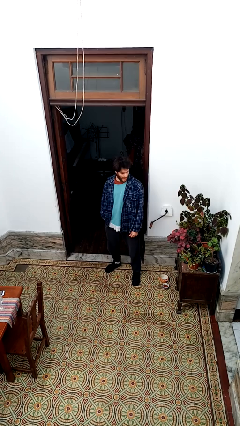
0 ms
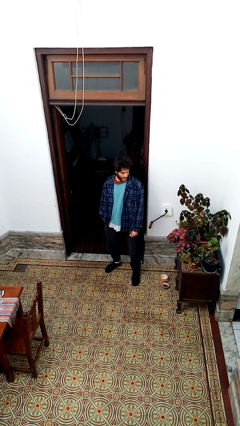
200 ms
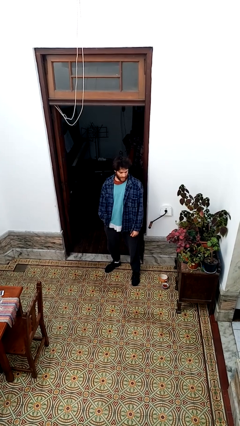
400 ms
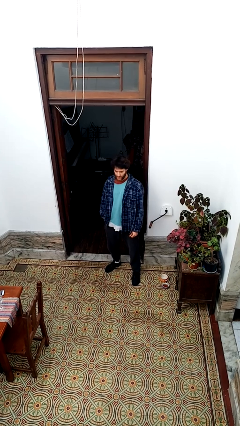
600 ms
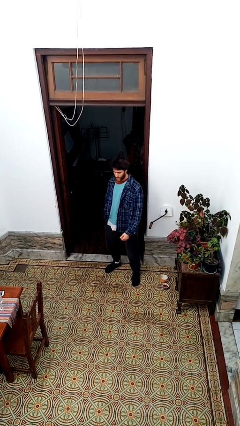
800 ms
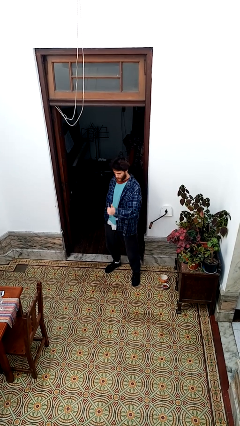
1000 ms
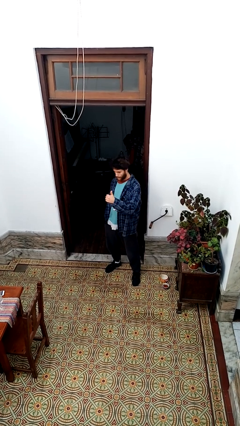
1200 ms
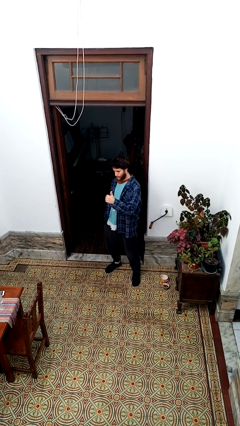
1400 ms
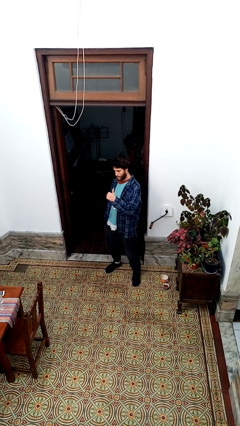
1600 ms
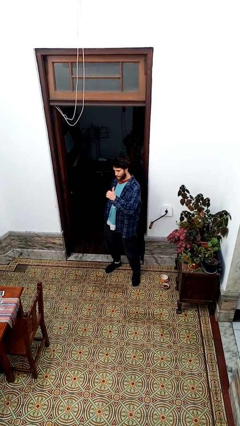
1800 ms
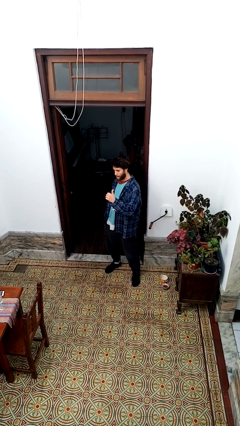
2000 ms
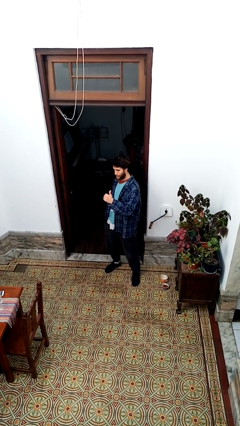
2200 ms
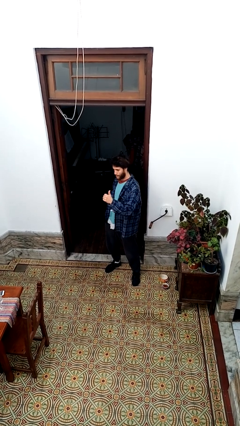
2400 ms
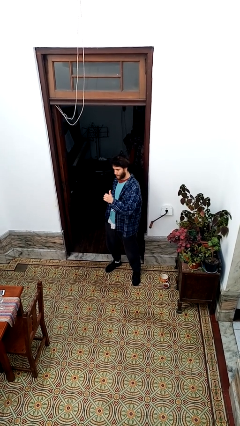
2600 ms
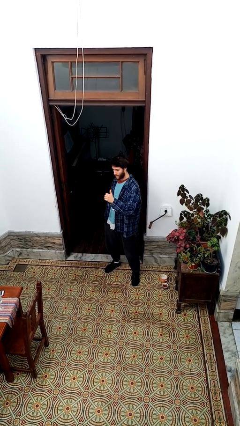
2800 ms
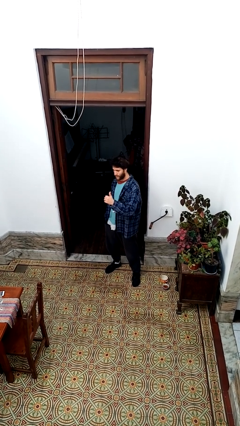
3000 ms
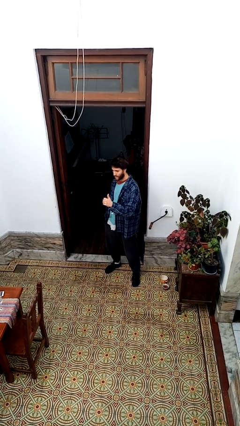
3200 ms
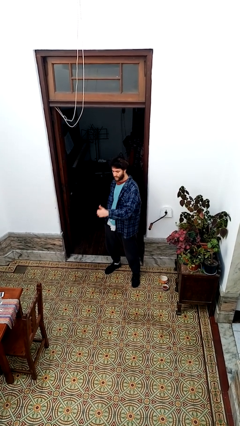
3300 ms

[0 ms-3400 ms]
person gestures thumbs up

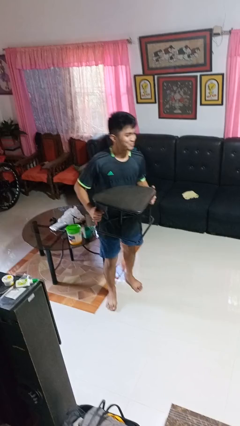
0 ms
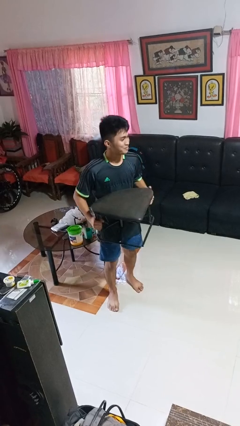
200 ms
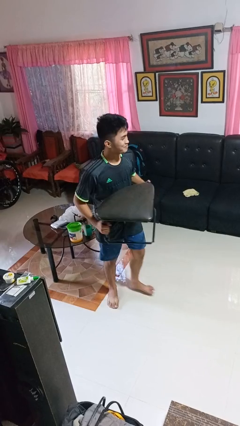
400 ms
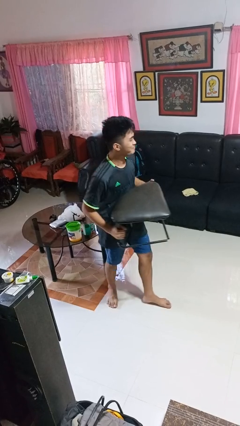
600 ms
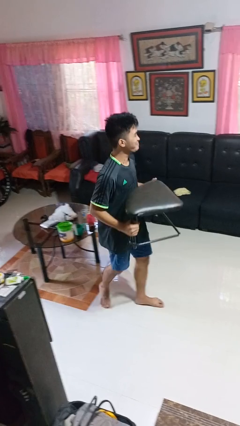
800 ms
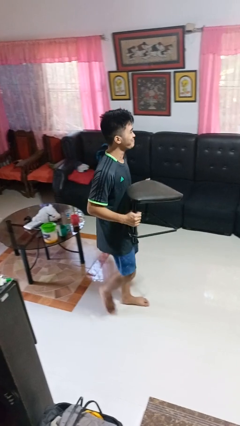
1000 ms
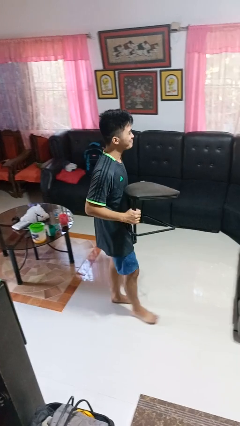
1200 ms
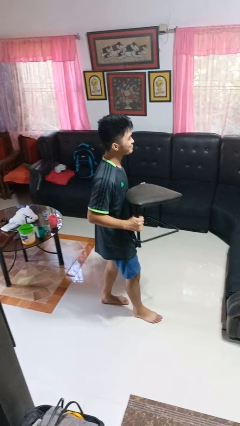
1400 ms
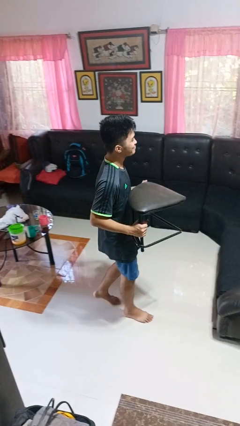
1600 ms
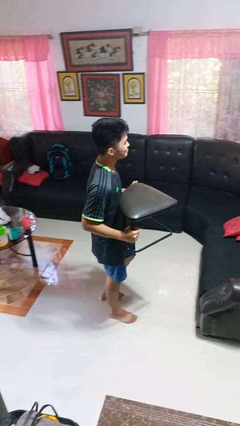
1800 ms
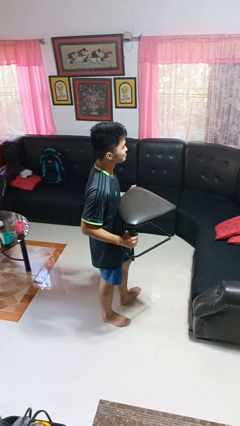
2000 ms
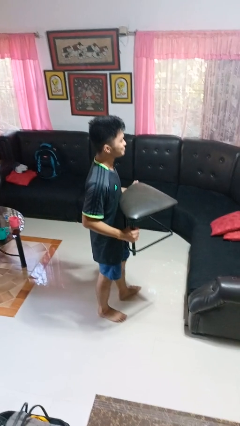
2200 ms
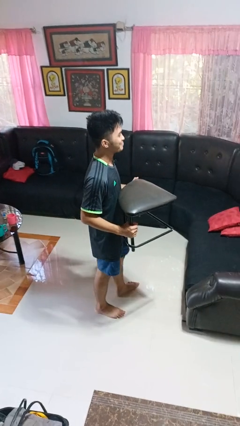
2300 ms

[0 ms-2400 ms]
person carries furniture

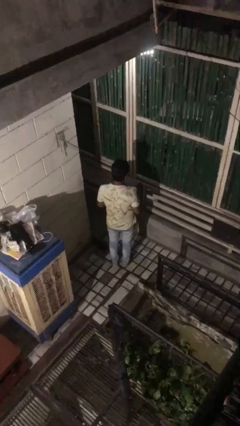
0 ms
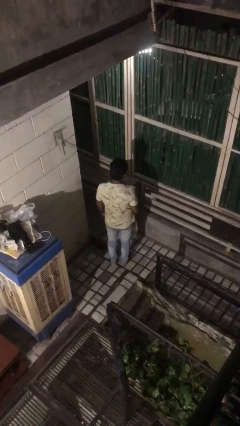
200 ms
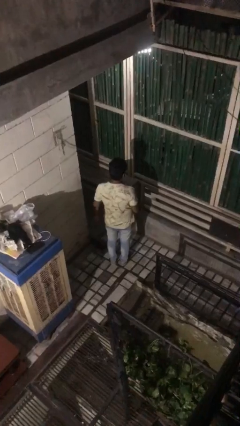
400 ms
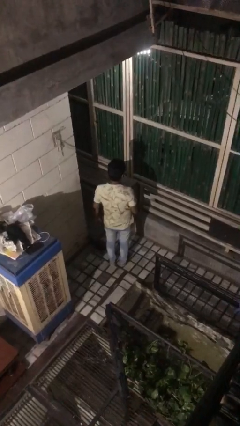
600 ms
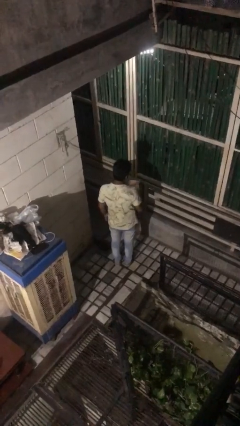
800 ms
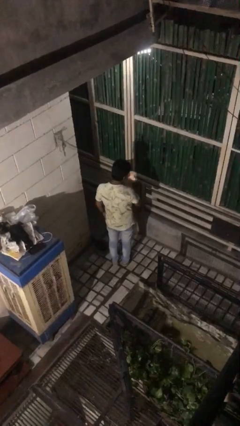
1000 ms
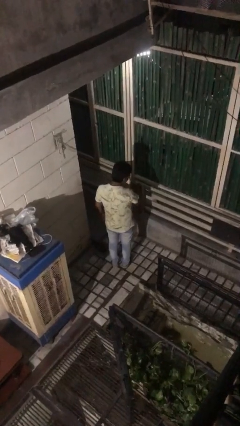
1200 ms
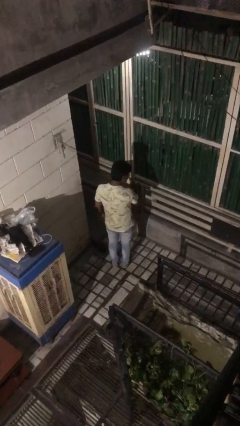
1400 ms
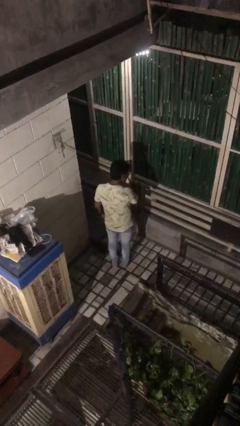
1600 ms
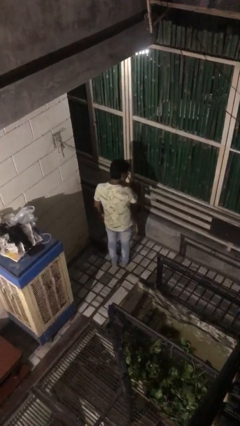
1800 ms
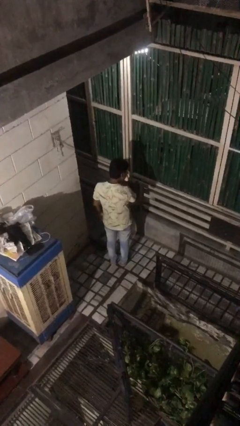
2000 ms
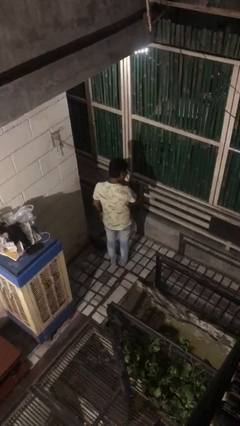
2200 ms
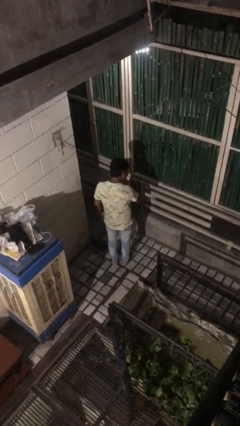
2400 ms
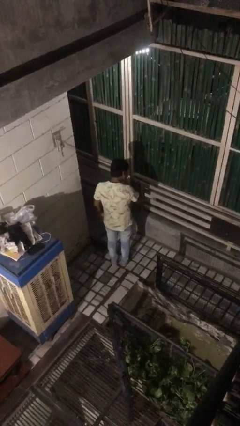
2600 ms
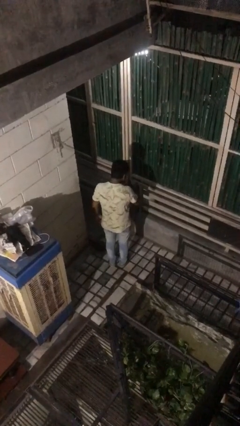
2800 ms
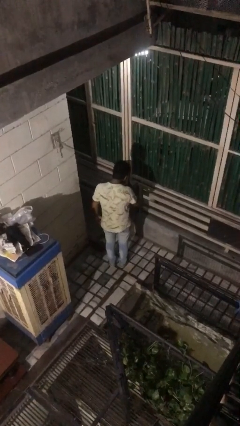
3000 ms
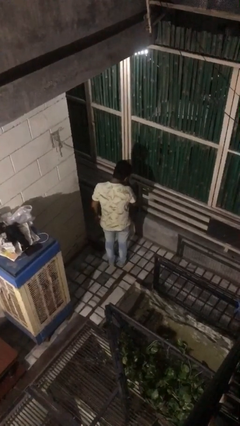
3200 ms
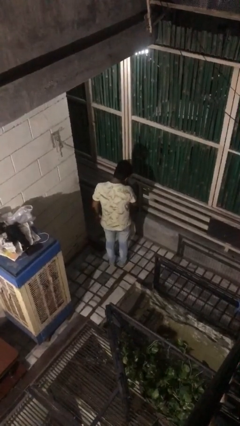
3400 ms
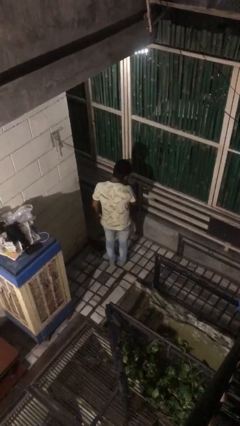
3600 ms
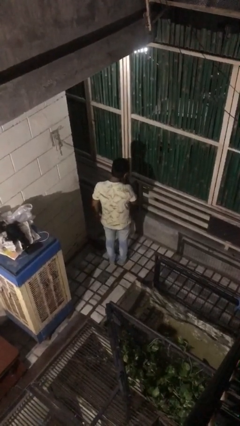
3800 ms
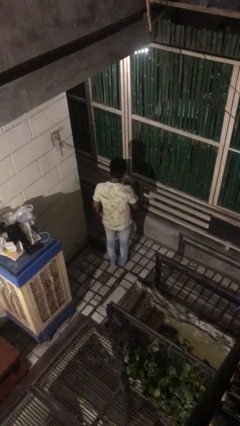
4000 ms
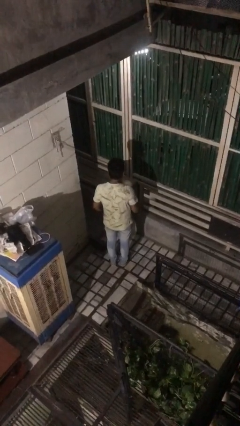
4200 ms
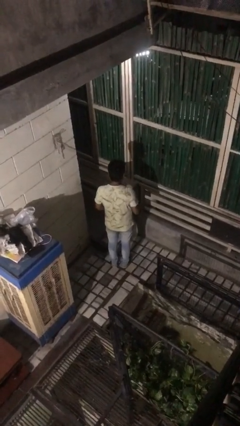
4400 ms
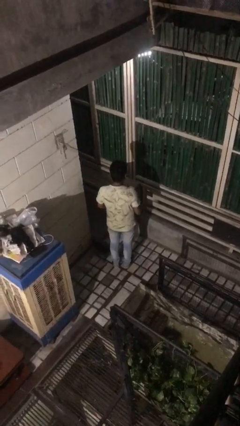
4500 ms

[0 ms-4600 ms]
person blows nose

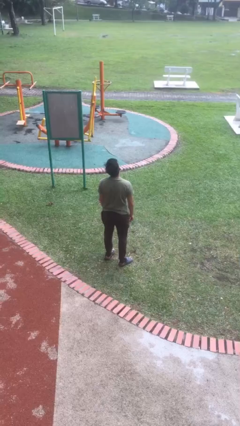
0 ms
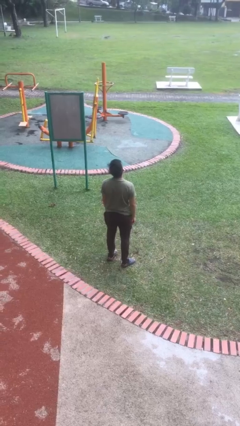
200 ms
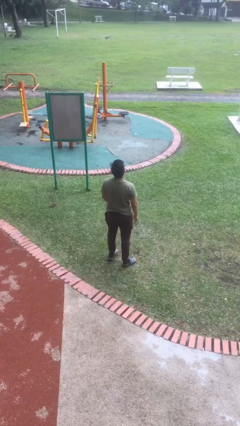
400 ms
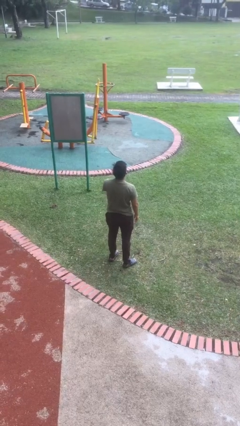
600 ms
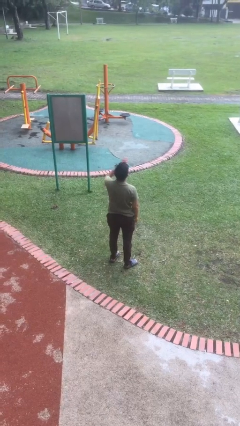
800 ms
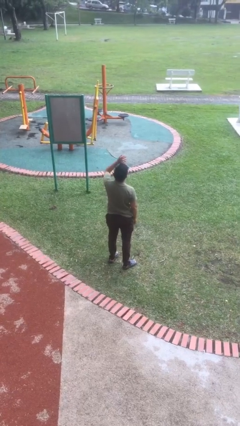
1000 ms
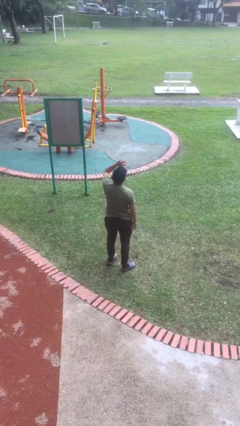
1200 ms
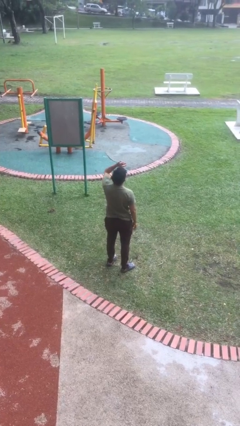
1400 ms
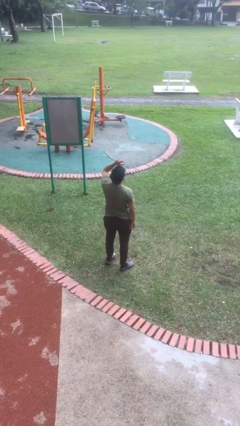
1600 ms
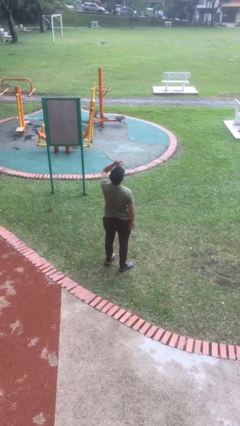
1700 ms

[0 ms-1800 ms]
person shades eyes

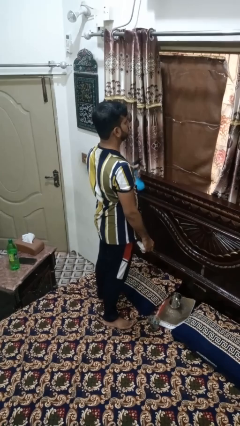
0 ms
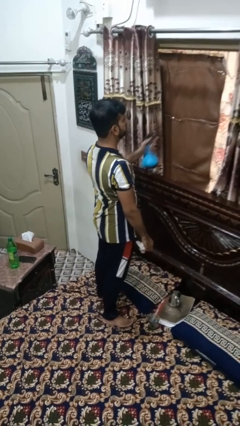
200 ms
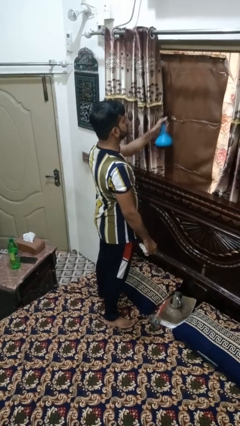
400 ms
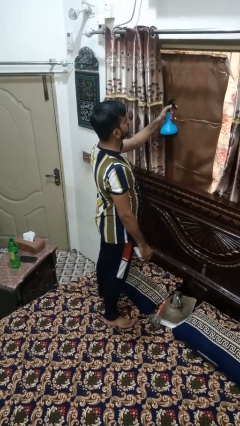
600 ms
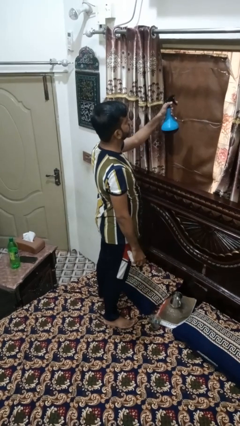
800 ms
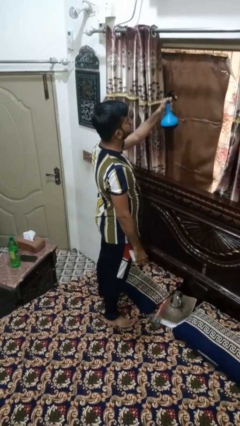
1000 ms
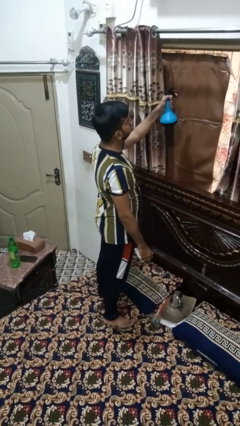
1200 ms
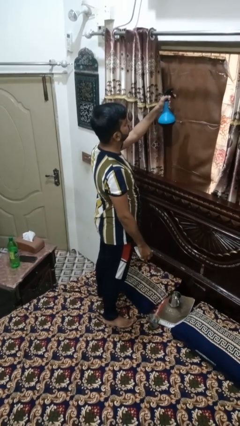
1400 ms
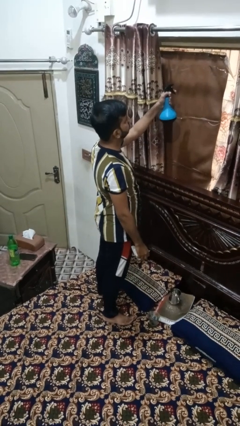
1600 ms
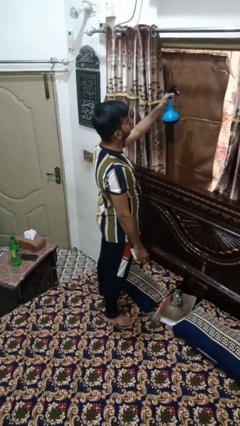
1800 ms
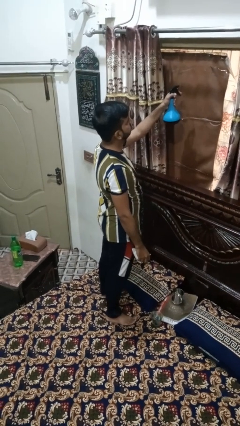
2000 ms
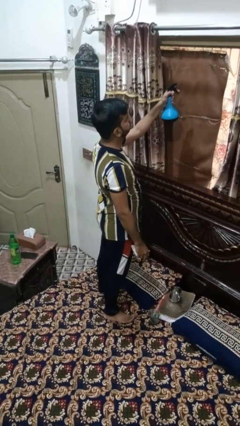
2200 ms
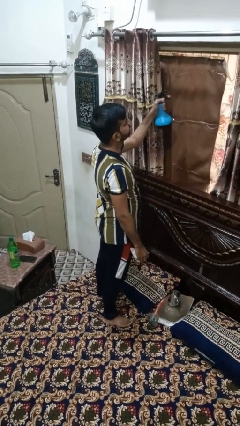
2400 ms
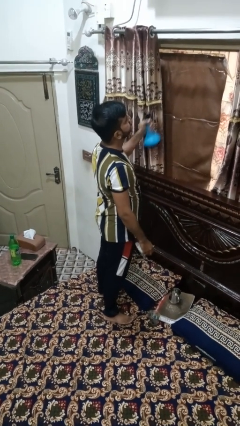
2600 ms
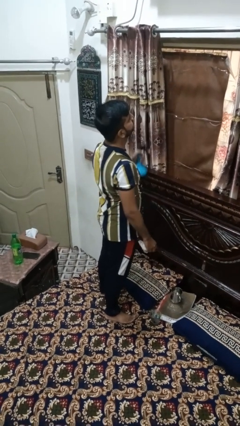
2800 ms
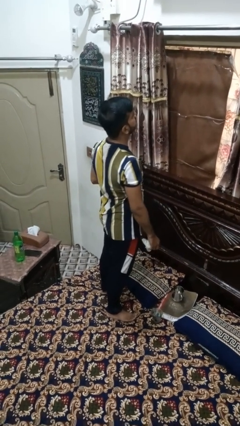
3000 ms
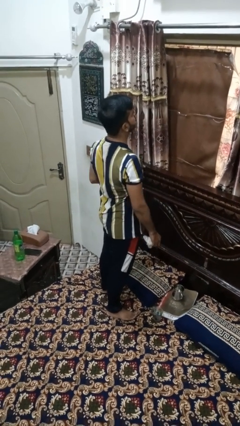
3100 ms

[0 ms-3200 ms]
person sprays from bottle

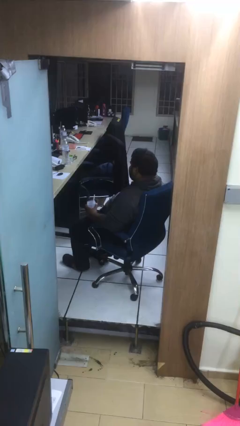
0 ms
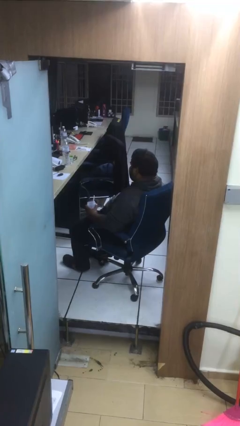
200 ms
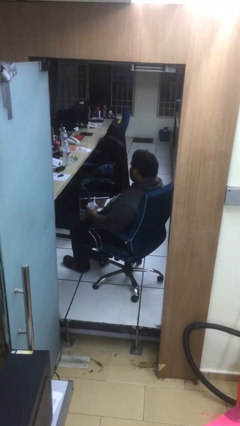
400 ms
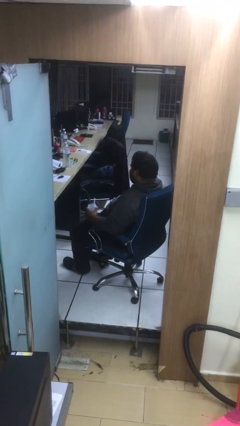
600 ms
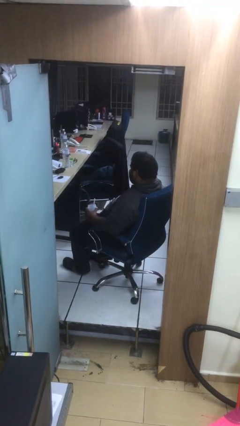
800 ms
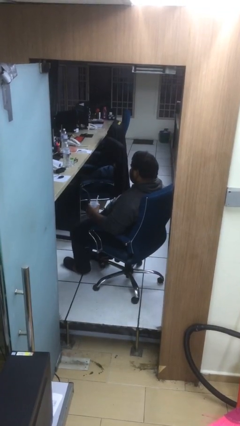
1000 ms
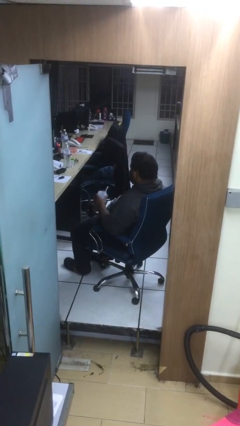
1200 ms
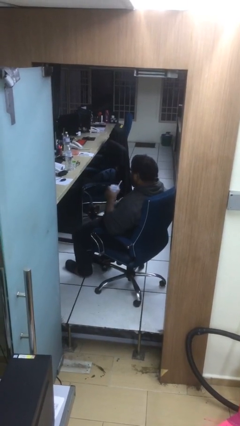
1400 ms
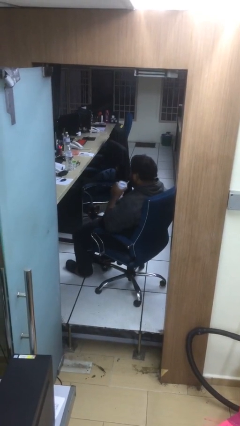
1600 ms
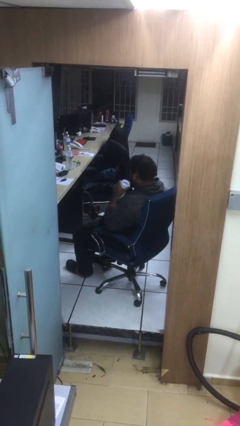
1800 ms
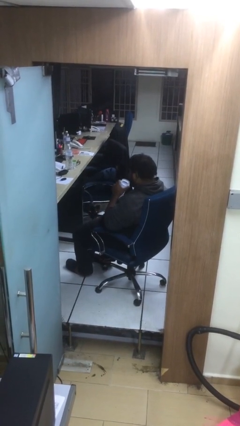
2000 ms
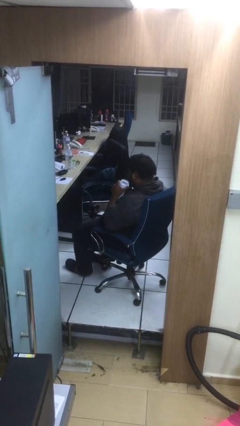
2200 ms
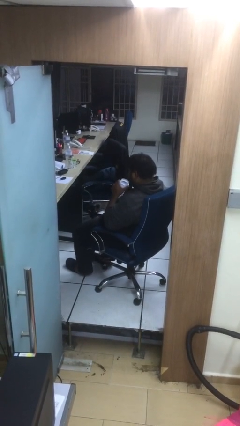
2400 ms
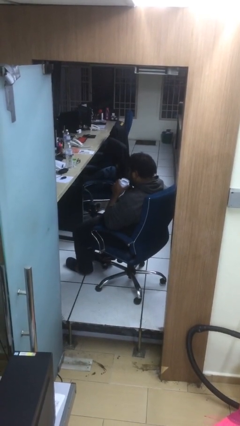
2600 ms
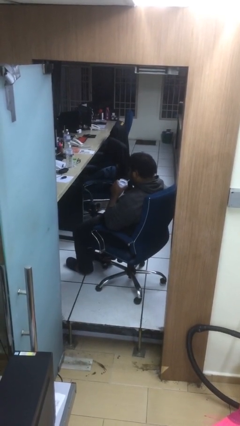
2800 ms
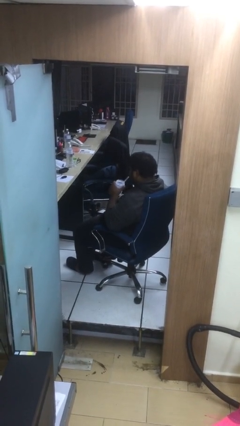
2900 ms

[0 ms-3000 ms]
person drinks from straw
